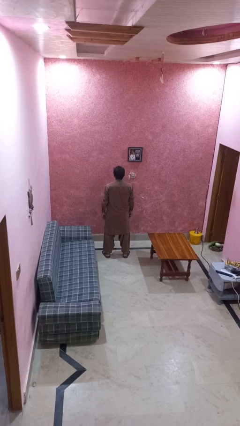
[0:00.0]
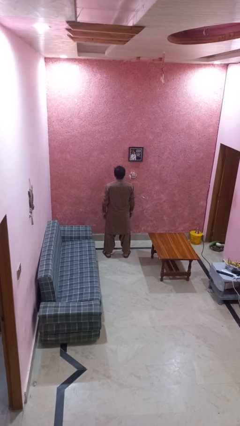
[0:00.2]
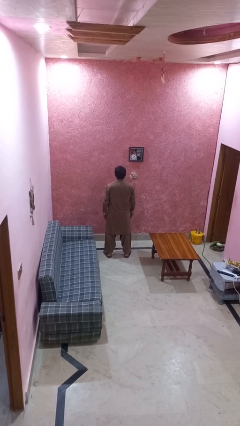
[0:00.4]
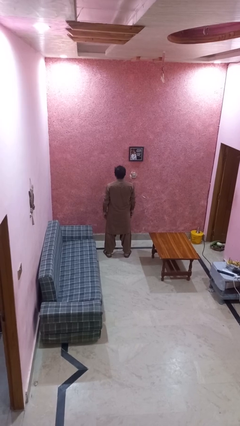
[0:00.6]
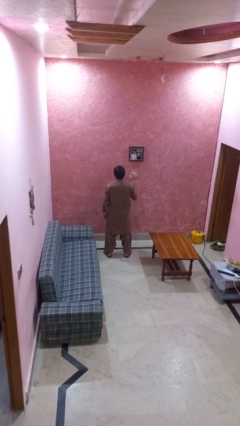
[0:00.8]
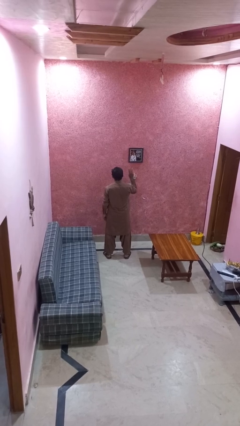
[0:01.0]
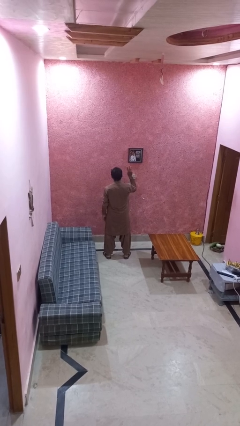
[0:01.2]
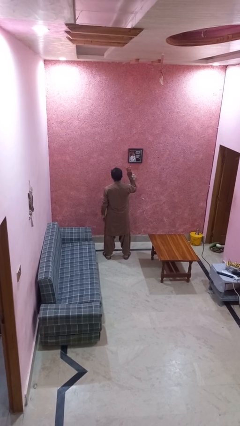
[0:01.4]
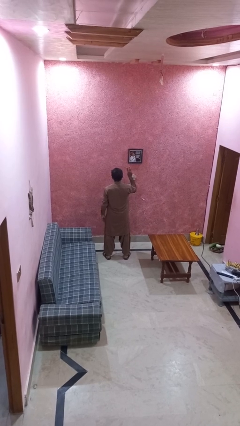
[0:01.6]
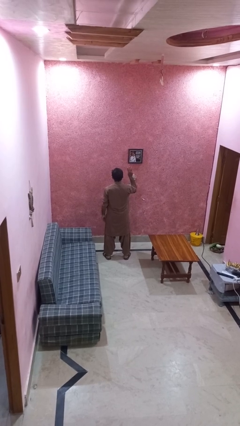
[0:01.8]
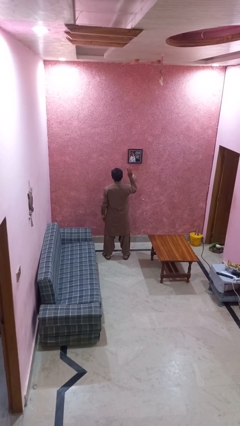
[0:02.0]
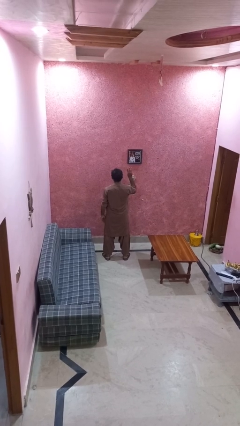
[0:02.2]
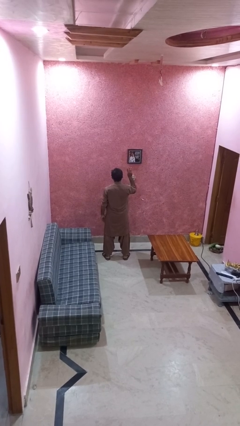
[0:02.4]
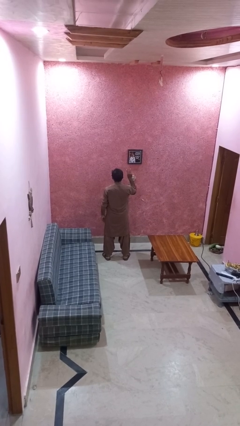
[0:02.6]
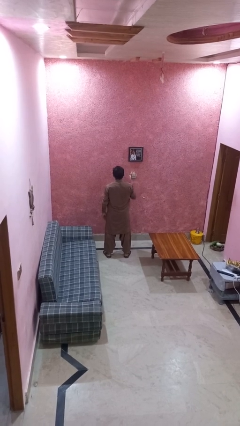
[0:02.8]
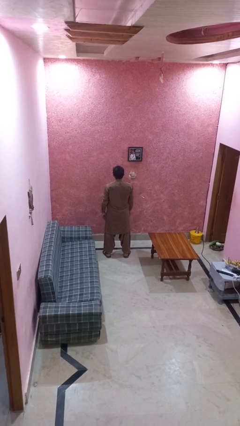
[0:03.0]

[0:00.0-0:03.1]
person gestures number three

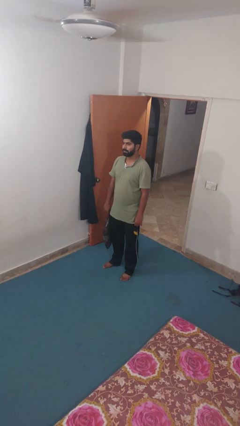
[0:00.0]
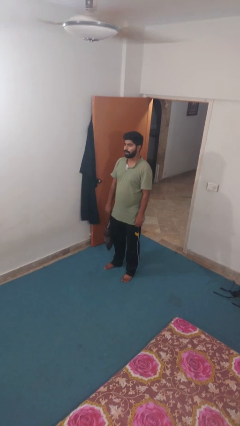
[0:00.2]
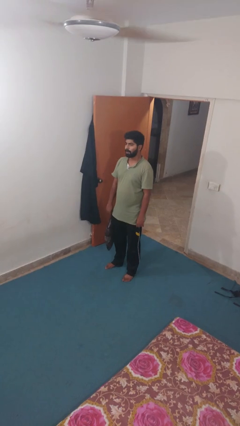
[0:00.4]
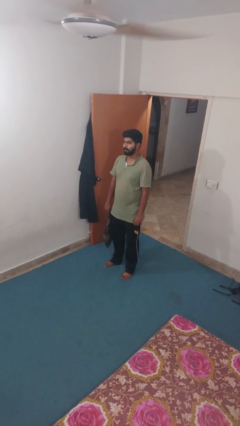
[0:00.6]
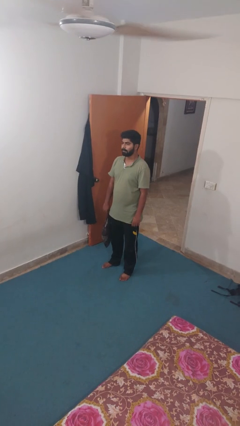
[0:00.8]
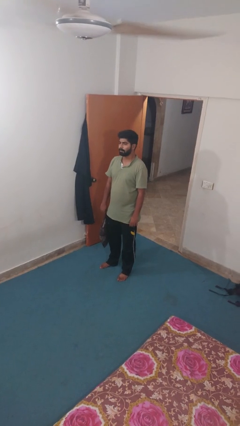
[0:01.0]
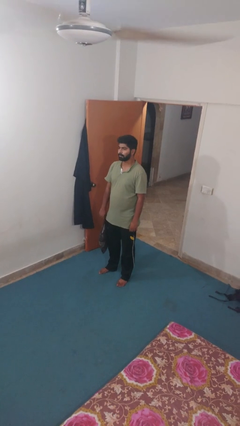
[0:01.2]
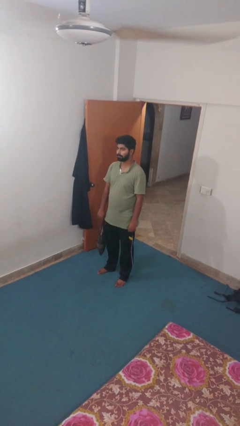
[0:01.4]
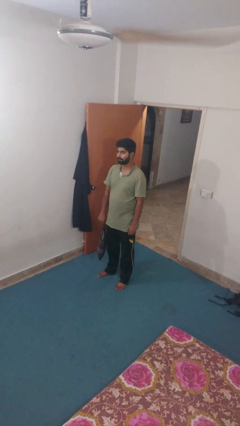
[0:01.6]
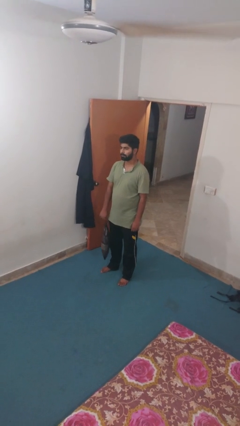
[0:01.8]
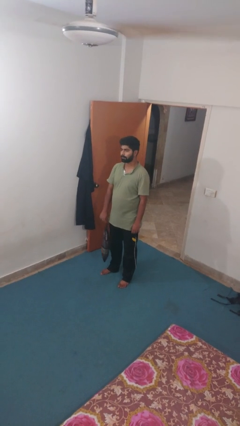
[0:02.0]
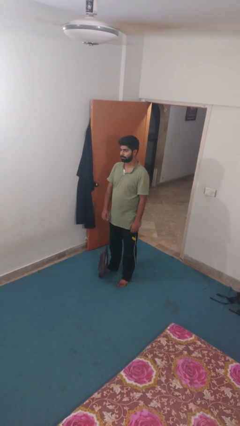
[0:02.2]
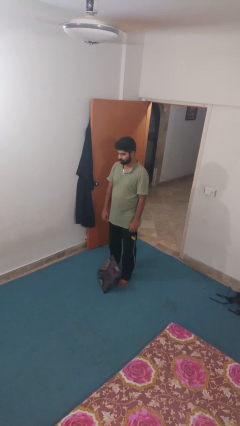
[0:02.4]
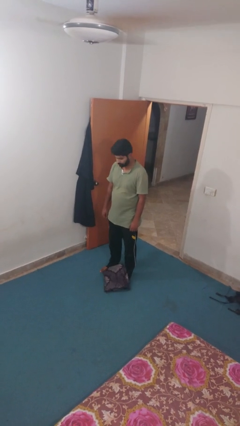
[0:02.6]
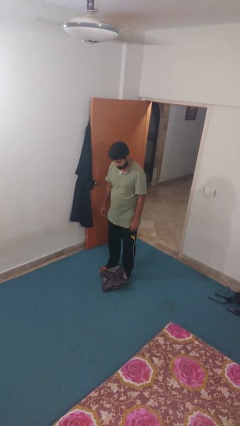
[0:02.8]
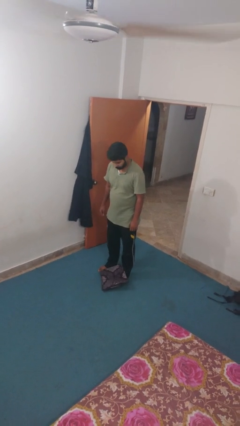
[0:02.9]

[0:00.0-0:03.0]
person drops object

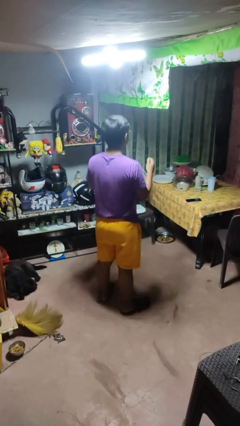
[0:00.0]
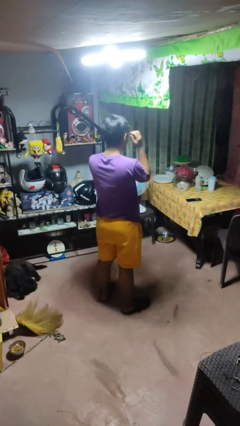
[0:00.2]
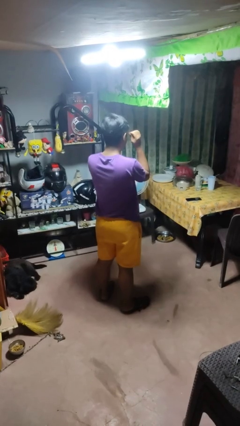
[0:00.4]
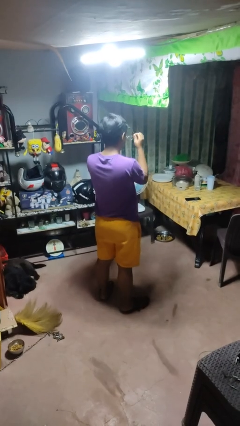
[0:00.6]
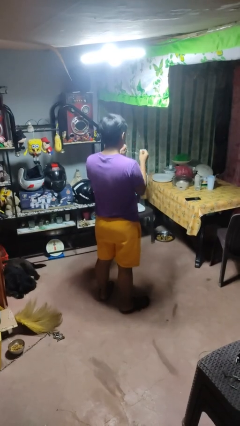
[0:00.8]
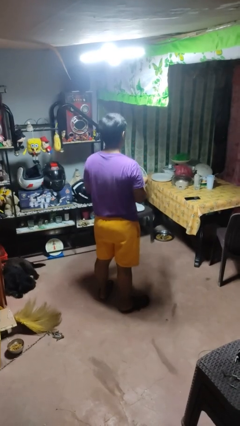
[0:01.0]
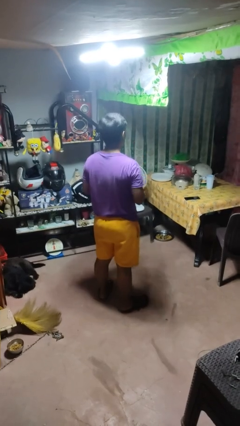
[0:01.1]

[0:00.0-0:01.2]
person takes off glasses

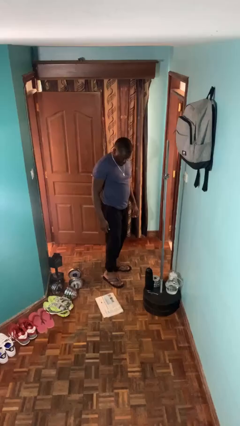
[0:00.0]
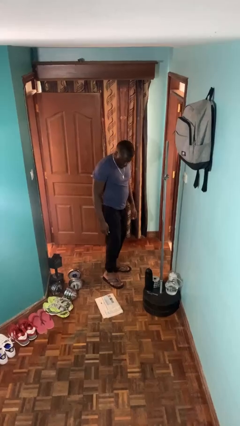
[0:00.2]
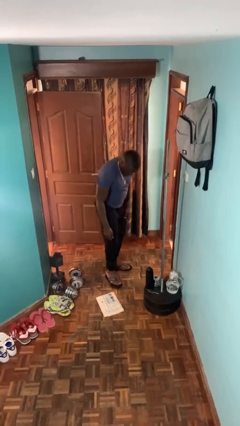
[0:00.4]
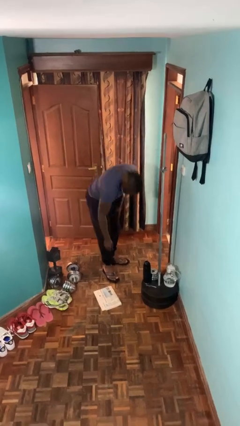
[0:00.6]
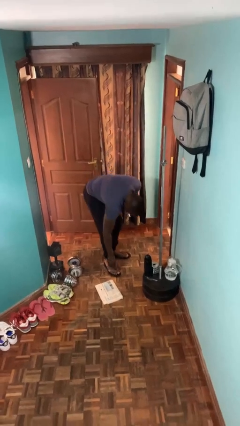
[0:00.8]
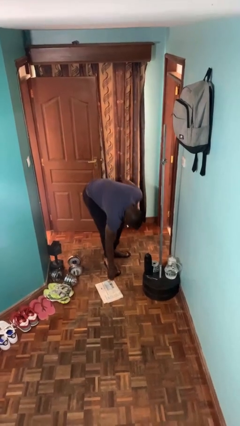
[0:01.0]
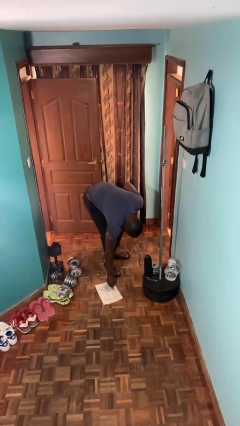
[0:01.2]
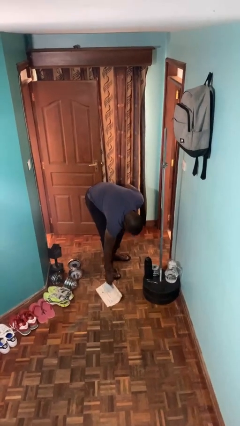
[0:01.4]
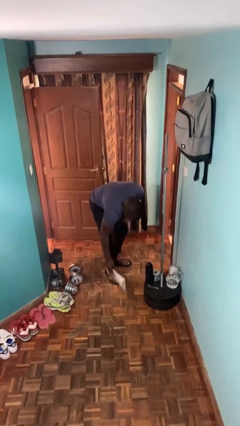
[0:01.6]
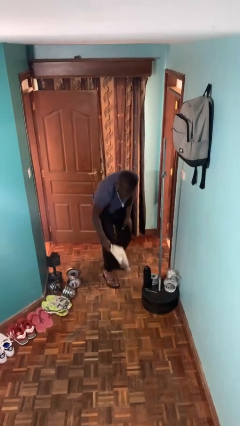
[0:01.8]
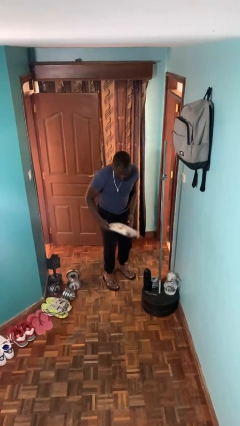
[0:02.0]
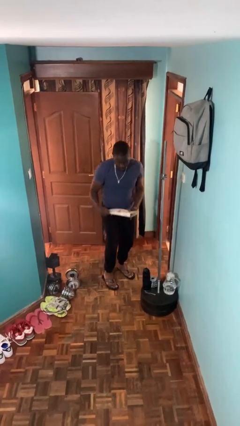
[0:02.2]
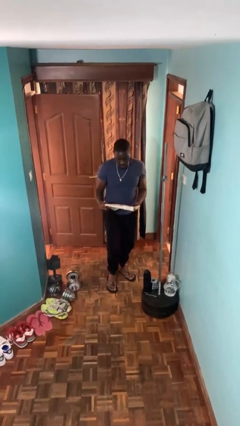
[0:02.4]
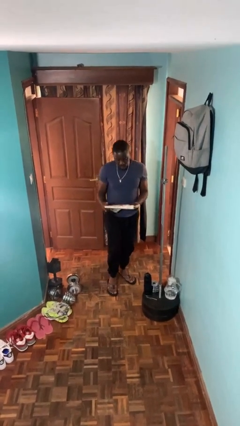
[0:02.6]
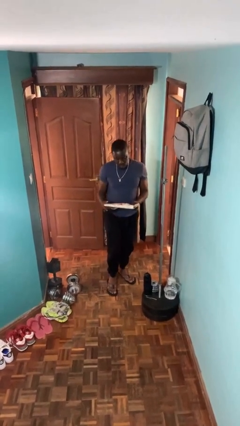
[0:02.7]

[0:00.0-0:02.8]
person picks up object from floor

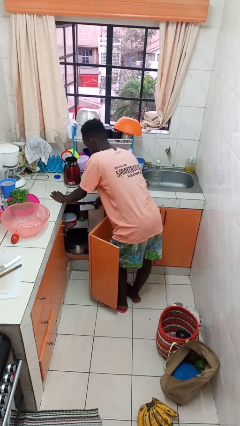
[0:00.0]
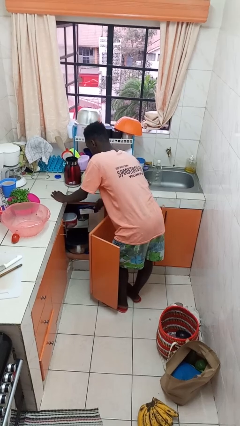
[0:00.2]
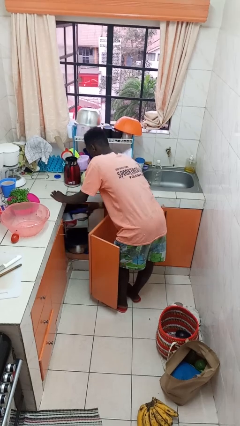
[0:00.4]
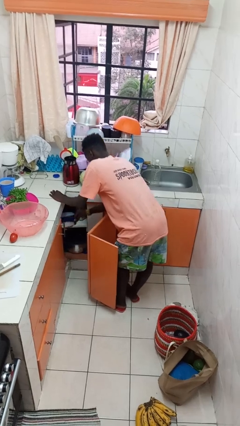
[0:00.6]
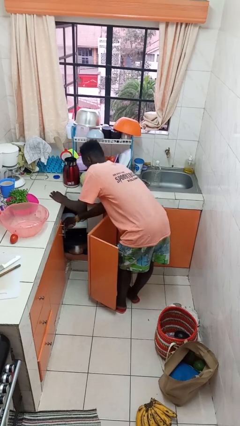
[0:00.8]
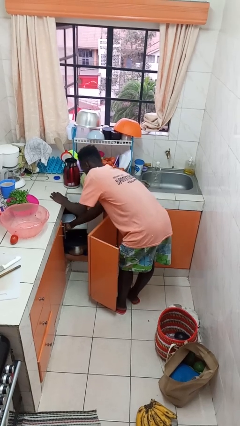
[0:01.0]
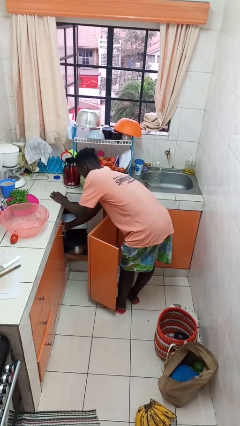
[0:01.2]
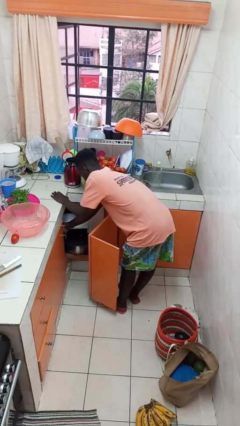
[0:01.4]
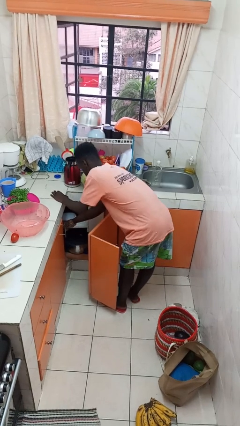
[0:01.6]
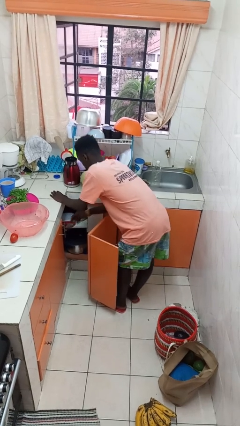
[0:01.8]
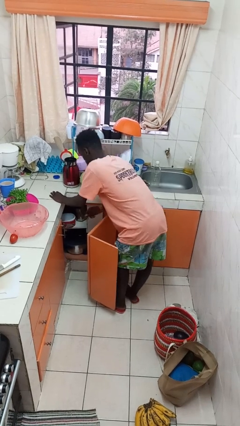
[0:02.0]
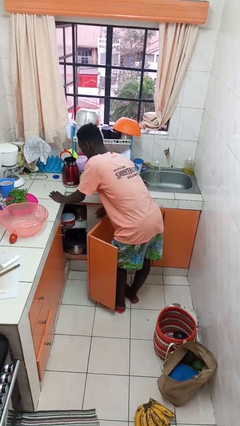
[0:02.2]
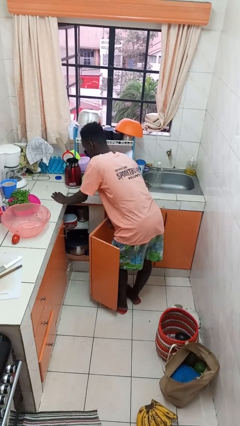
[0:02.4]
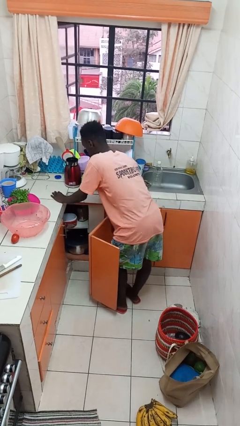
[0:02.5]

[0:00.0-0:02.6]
person puts object in cabinet

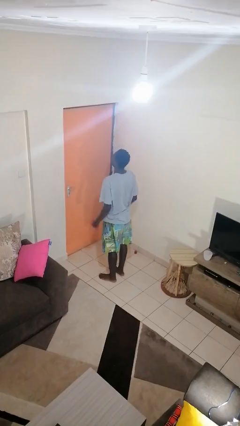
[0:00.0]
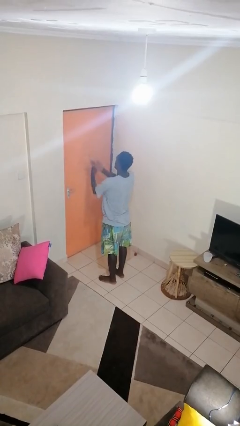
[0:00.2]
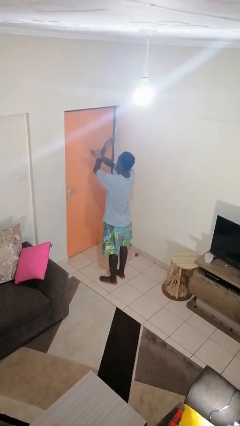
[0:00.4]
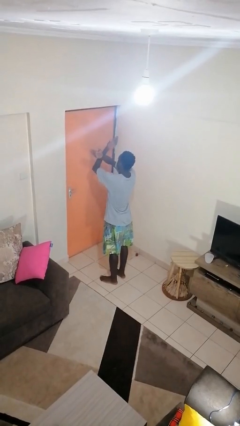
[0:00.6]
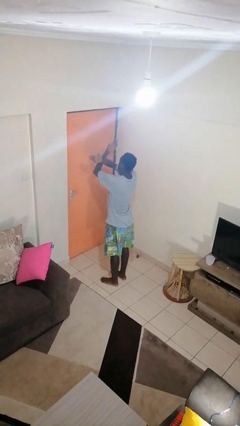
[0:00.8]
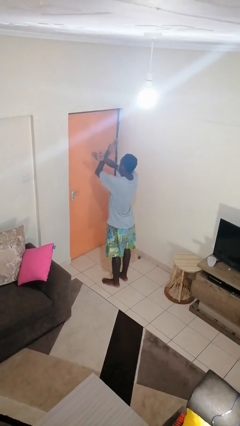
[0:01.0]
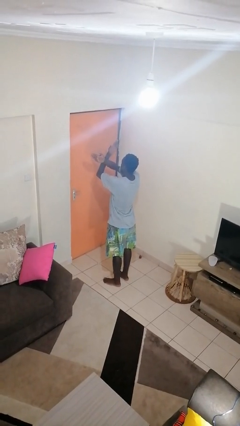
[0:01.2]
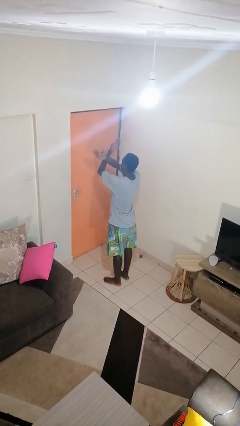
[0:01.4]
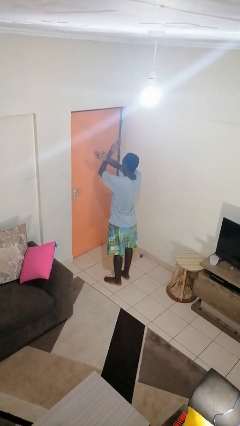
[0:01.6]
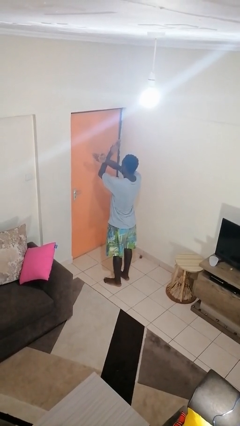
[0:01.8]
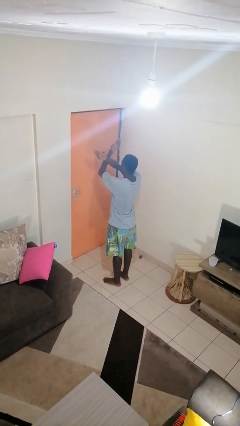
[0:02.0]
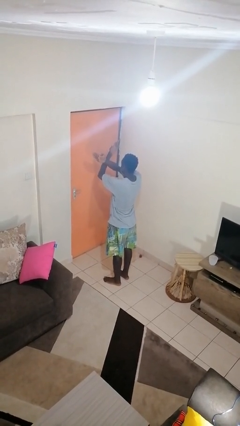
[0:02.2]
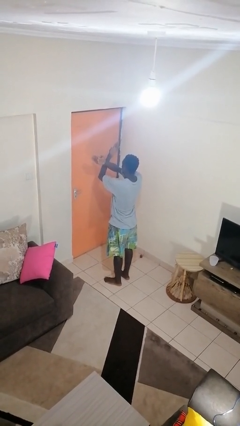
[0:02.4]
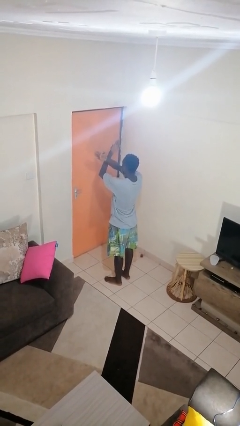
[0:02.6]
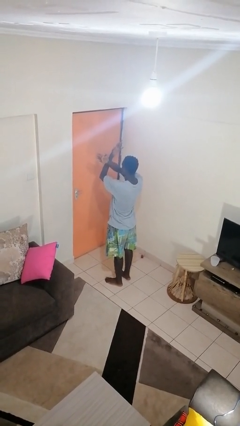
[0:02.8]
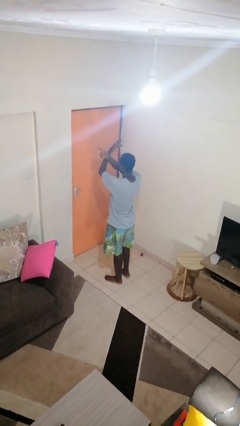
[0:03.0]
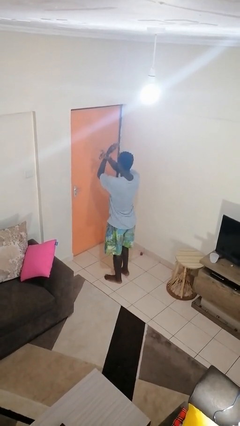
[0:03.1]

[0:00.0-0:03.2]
person gestures arms x

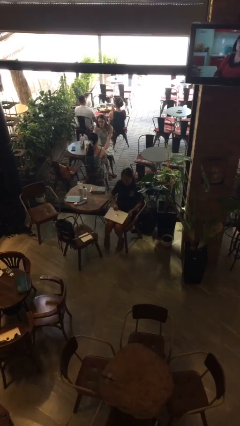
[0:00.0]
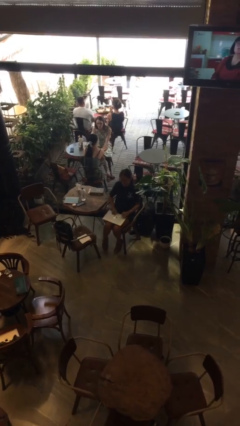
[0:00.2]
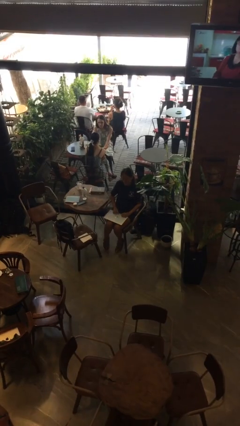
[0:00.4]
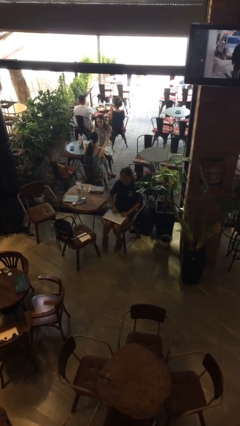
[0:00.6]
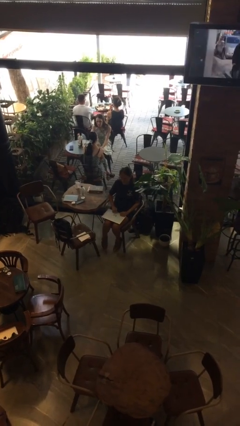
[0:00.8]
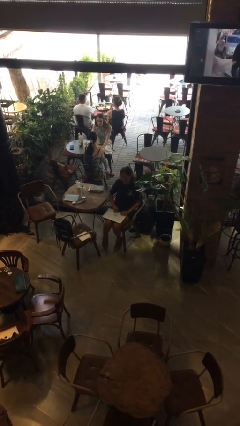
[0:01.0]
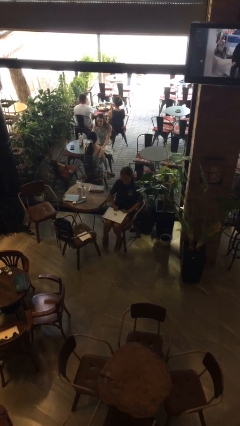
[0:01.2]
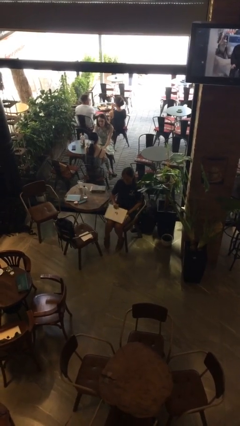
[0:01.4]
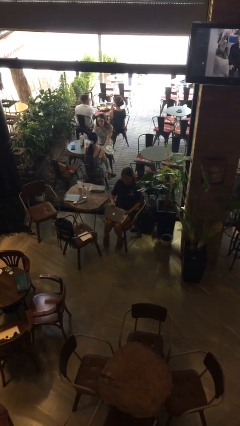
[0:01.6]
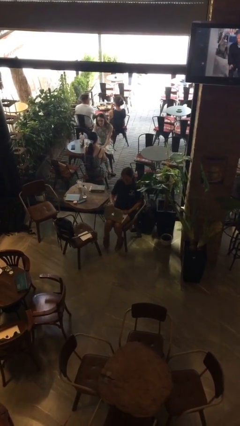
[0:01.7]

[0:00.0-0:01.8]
person closes laptop
